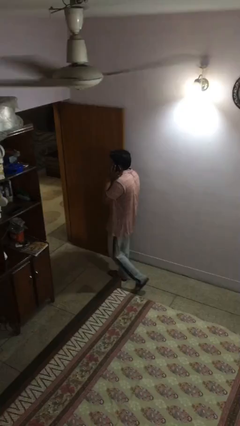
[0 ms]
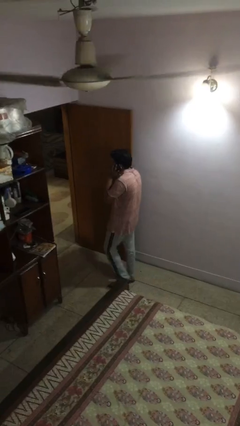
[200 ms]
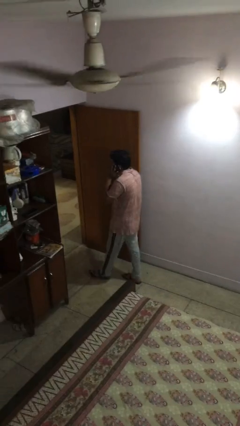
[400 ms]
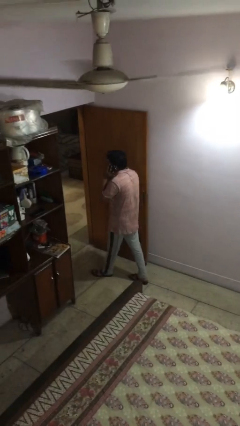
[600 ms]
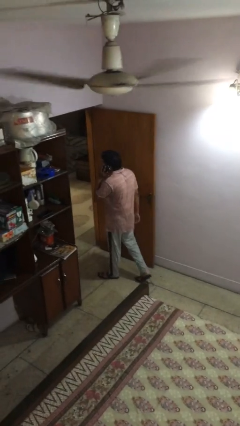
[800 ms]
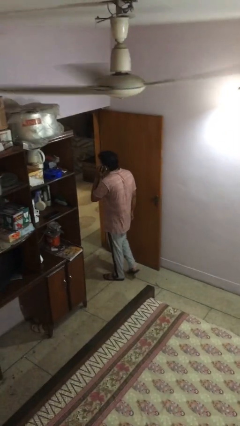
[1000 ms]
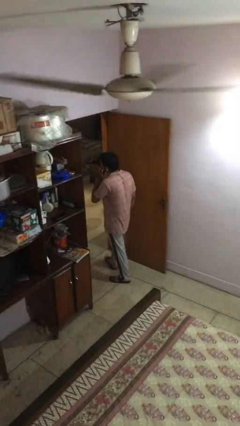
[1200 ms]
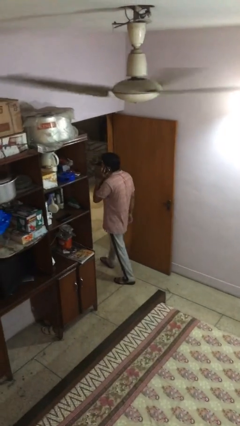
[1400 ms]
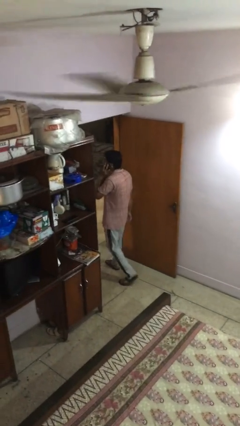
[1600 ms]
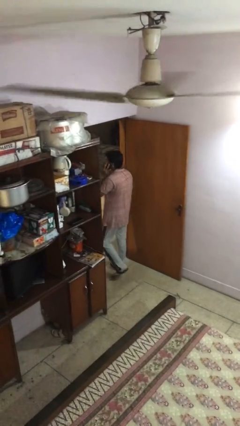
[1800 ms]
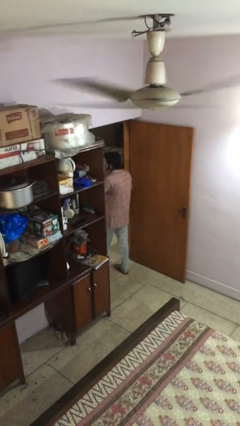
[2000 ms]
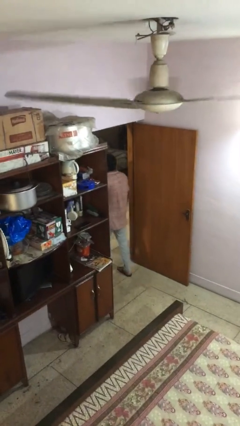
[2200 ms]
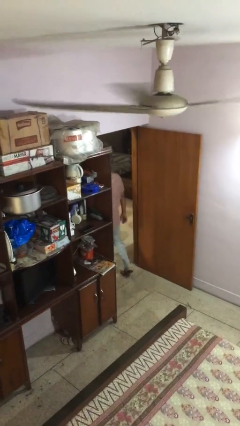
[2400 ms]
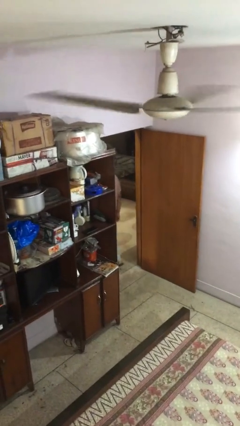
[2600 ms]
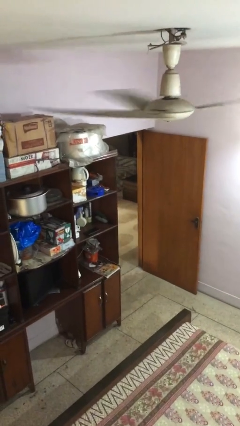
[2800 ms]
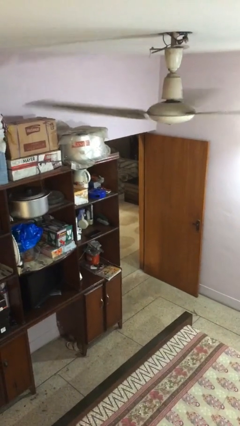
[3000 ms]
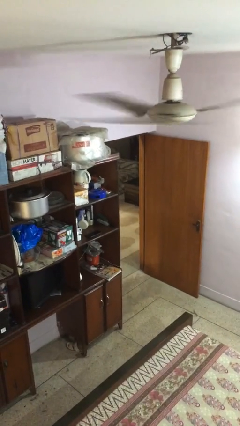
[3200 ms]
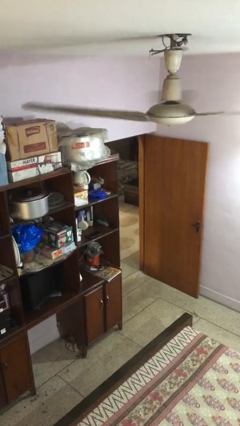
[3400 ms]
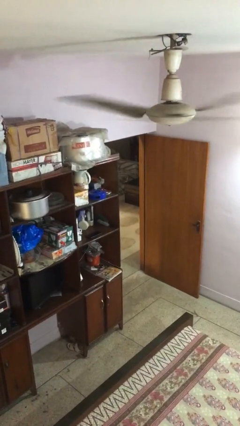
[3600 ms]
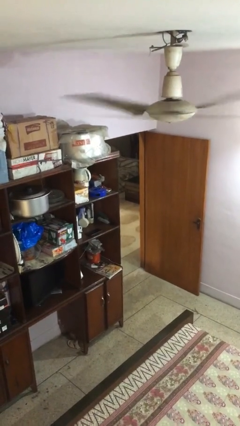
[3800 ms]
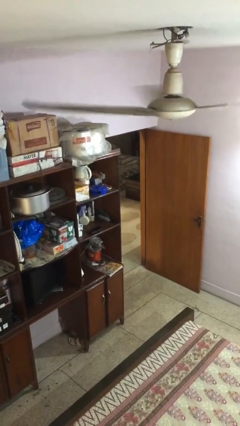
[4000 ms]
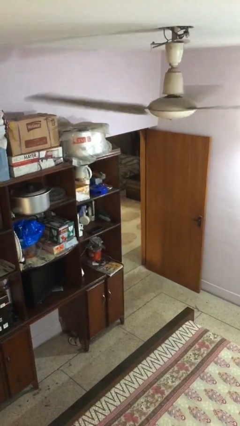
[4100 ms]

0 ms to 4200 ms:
person exits scene through structure

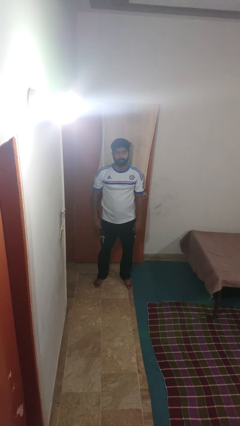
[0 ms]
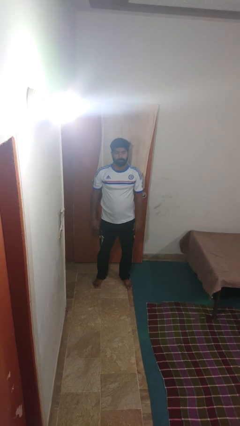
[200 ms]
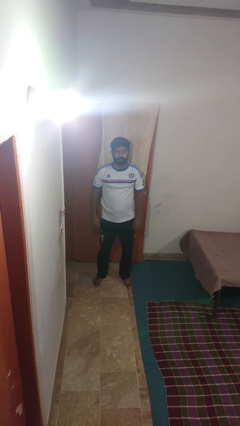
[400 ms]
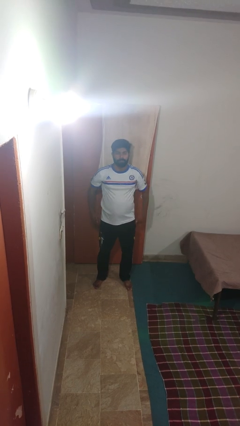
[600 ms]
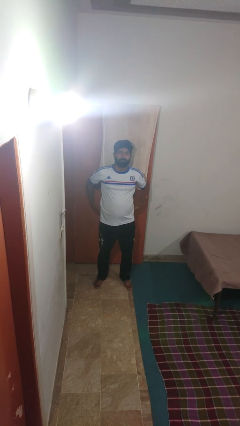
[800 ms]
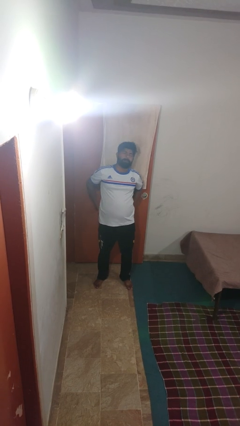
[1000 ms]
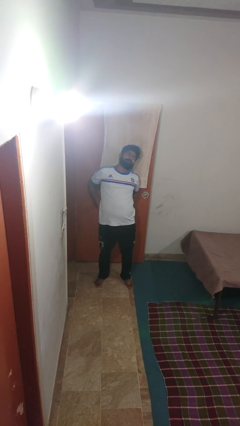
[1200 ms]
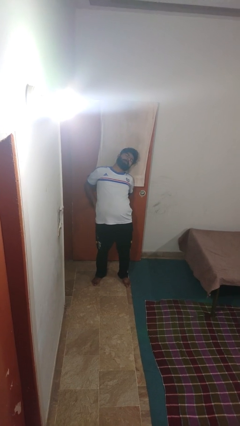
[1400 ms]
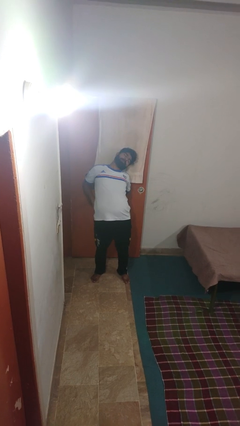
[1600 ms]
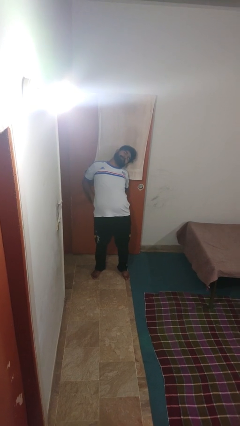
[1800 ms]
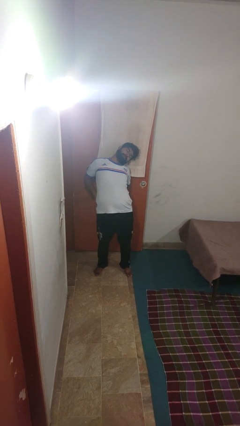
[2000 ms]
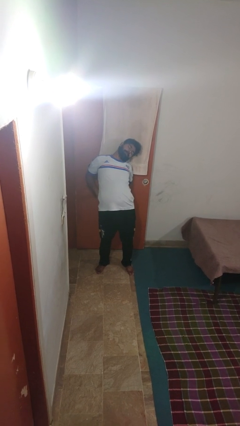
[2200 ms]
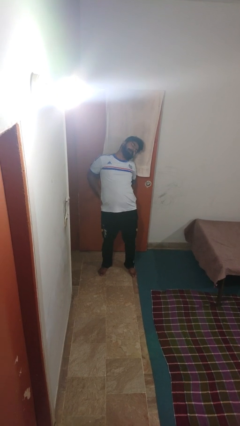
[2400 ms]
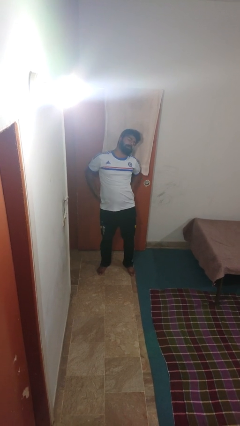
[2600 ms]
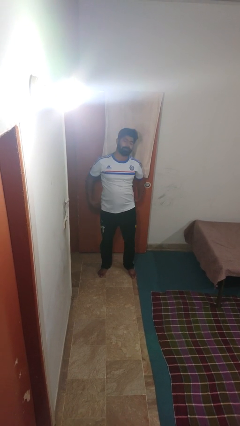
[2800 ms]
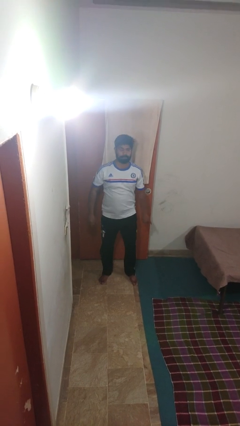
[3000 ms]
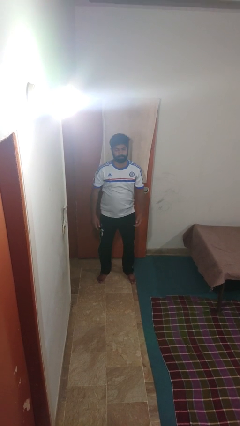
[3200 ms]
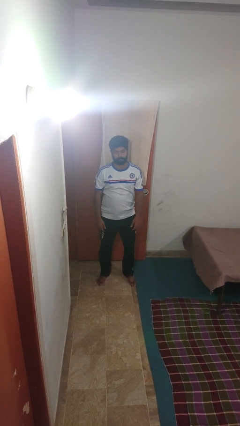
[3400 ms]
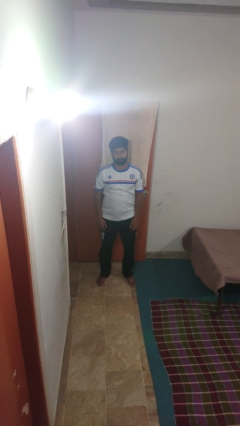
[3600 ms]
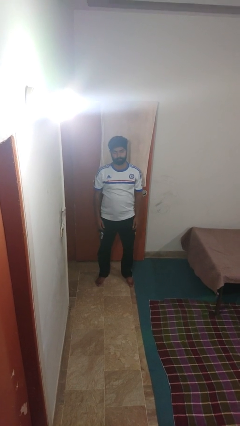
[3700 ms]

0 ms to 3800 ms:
person stretches back

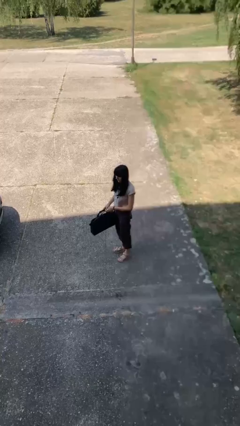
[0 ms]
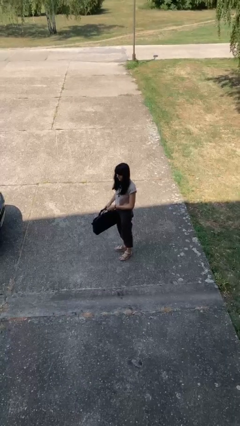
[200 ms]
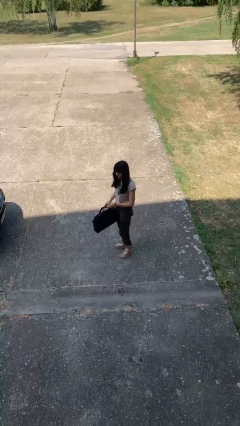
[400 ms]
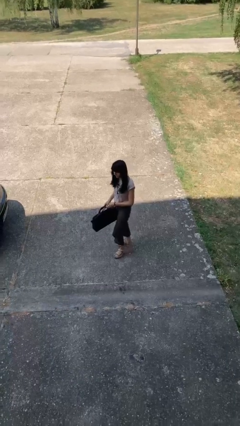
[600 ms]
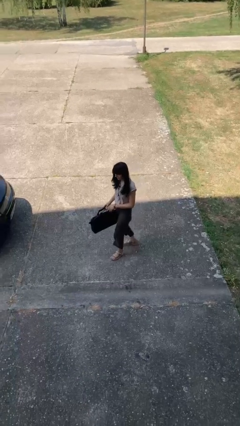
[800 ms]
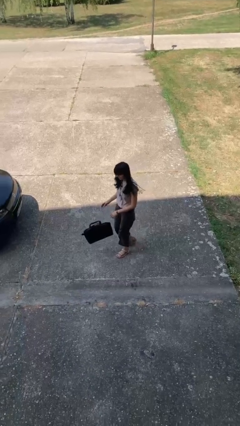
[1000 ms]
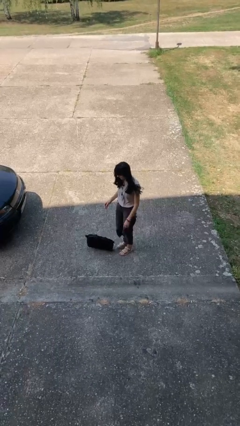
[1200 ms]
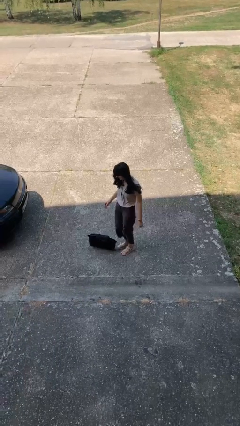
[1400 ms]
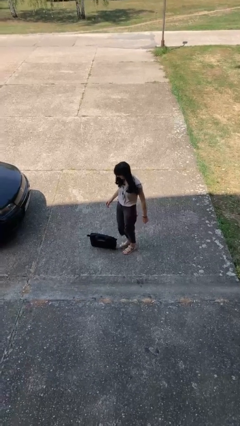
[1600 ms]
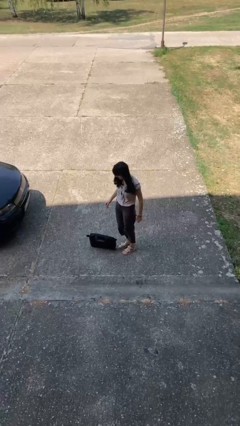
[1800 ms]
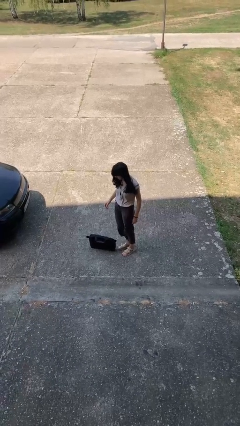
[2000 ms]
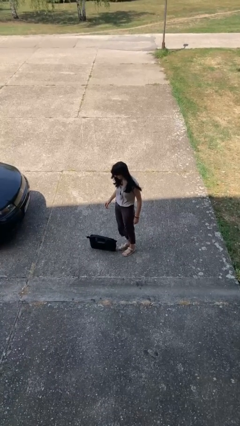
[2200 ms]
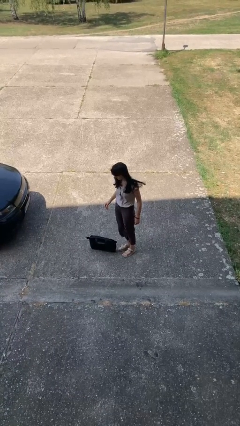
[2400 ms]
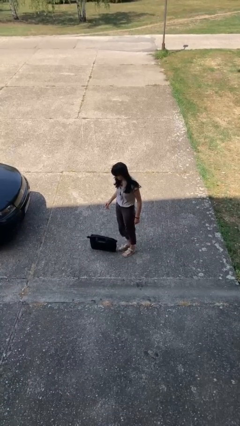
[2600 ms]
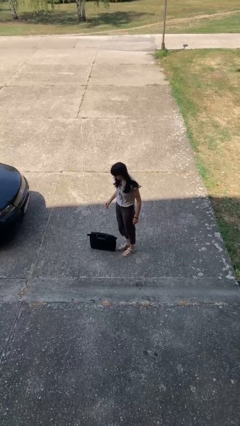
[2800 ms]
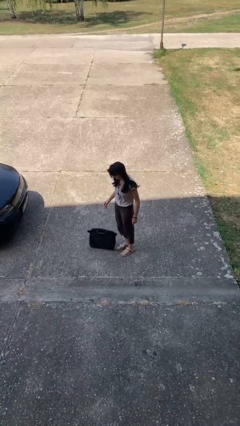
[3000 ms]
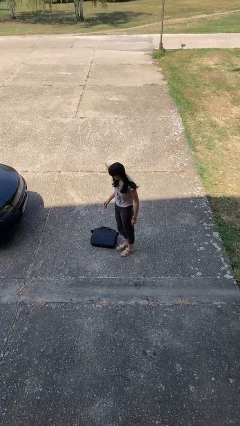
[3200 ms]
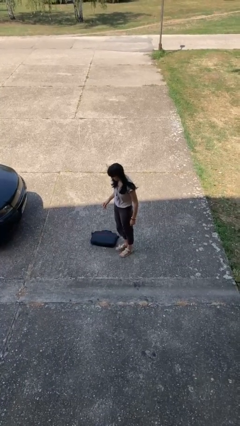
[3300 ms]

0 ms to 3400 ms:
person drops object

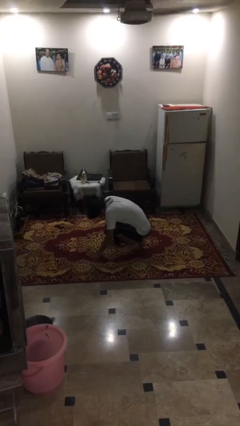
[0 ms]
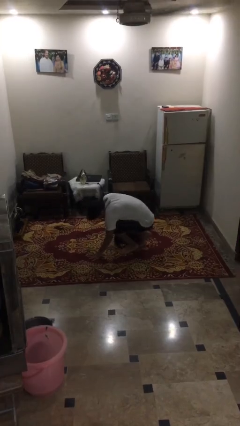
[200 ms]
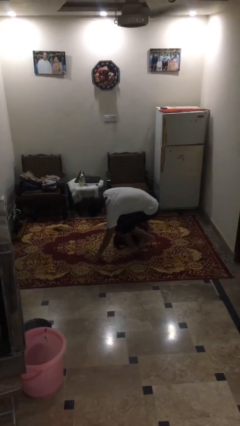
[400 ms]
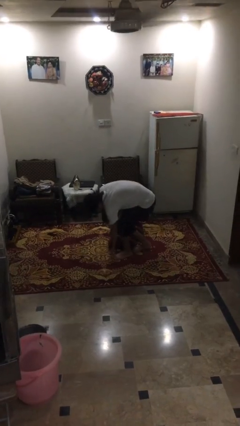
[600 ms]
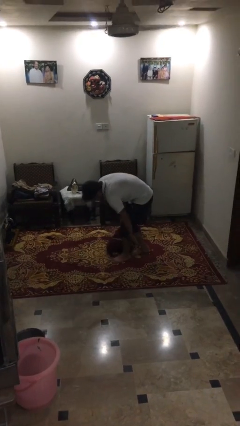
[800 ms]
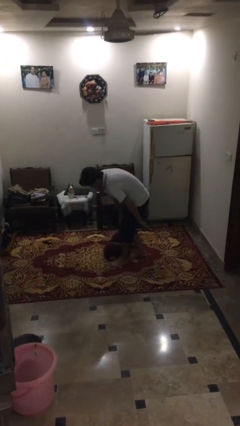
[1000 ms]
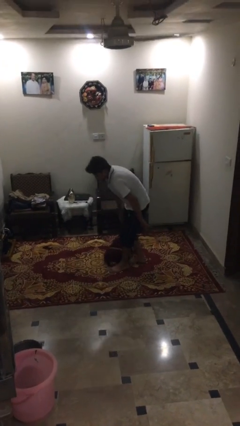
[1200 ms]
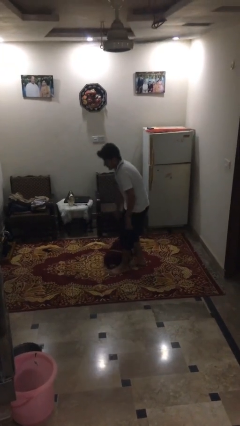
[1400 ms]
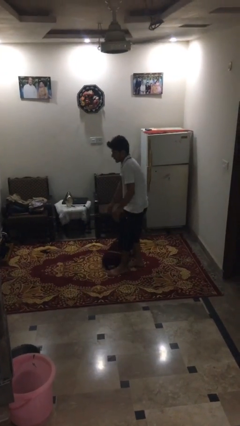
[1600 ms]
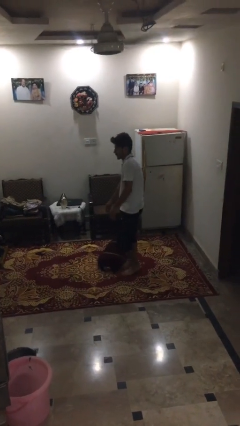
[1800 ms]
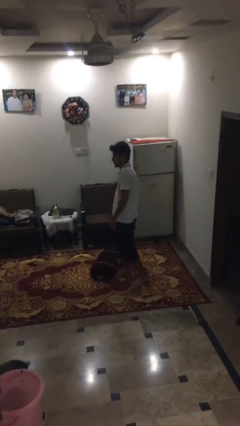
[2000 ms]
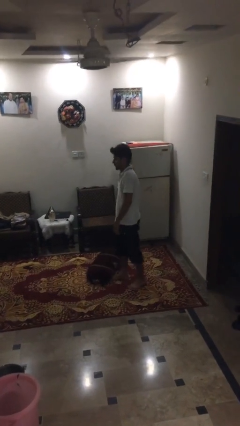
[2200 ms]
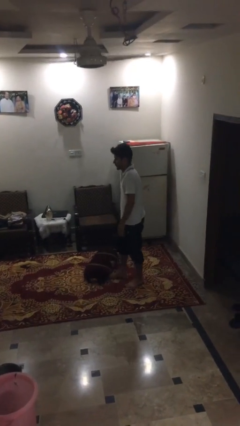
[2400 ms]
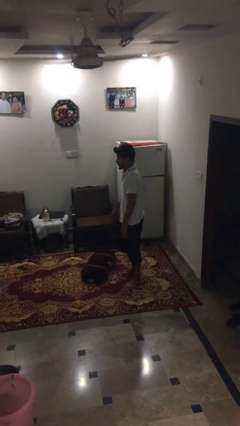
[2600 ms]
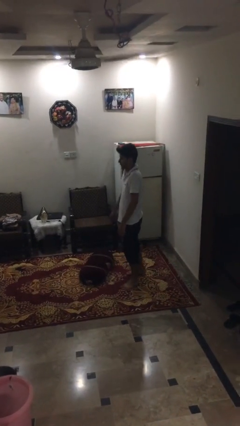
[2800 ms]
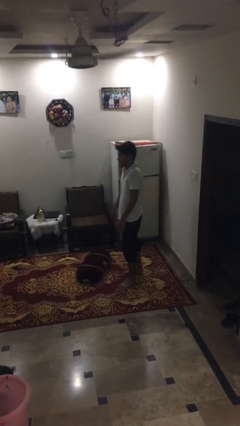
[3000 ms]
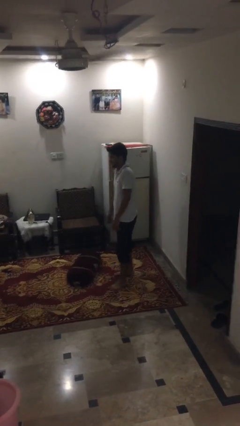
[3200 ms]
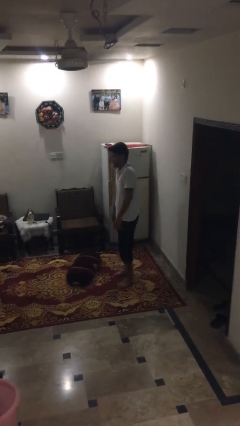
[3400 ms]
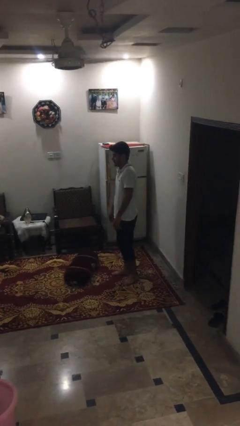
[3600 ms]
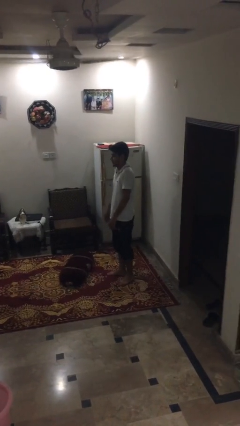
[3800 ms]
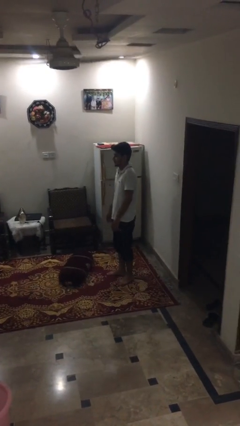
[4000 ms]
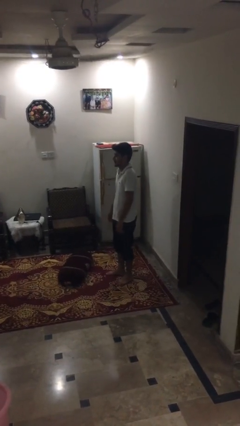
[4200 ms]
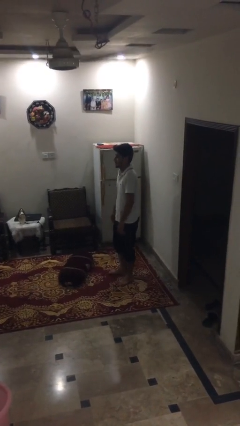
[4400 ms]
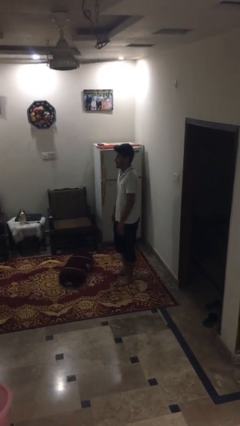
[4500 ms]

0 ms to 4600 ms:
person stands up from floor

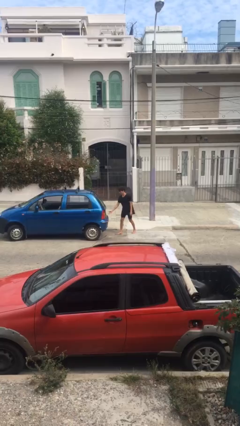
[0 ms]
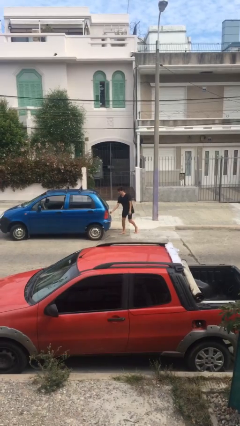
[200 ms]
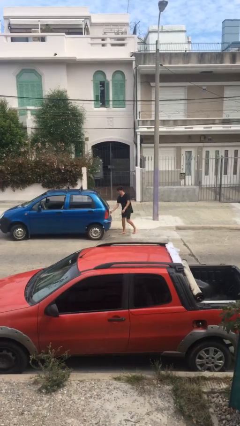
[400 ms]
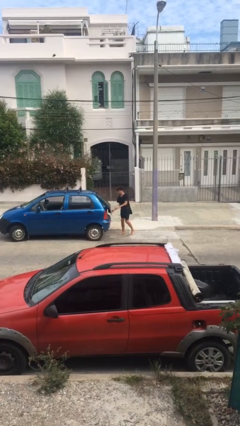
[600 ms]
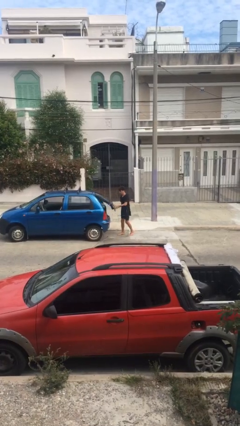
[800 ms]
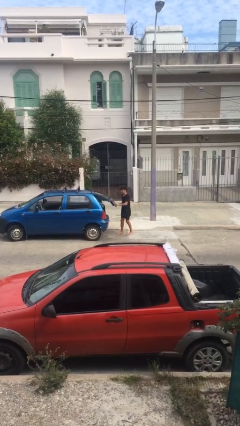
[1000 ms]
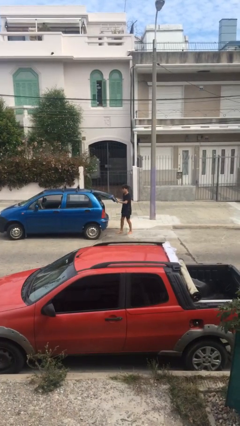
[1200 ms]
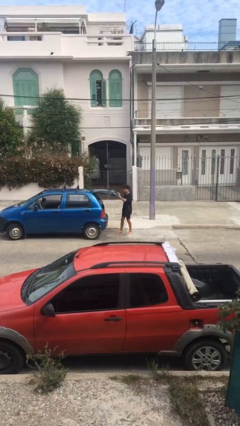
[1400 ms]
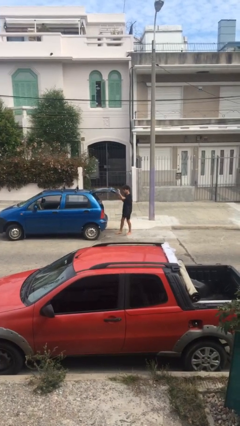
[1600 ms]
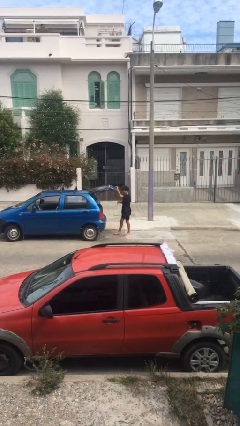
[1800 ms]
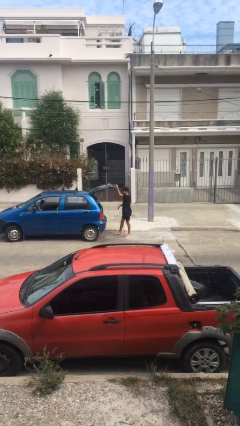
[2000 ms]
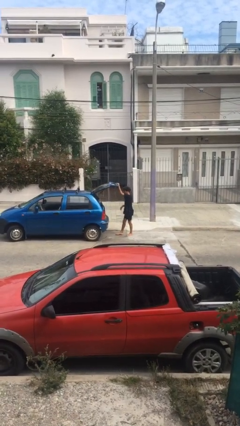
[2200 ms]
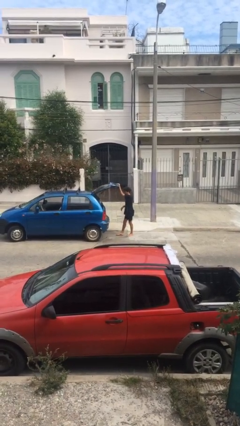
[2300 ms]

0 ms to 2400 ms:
person opens car trunk
